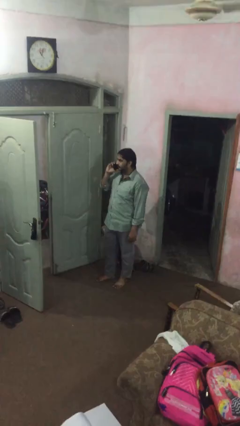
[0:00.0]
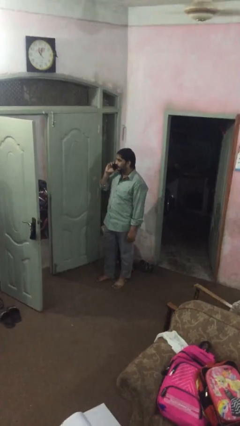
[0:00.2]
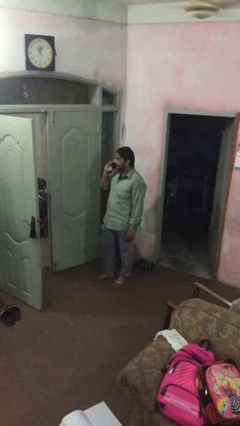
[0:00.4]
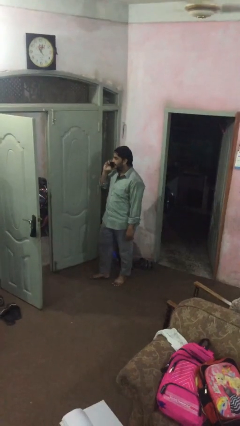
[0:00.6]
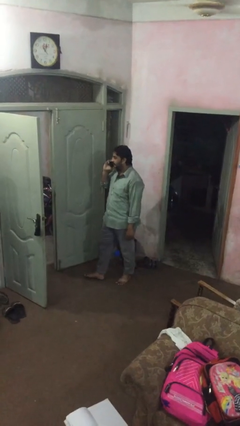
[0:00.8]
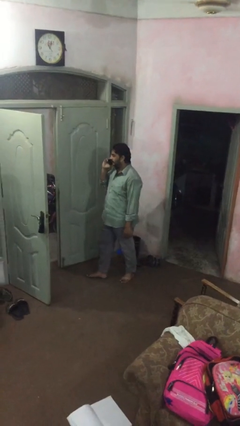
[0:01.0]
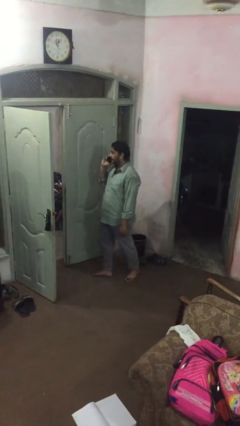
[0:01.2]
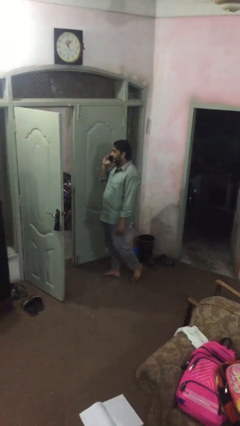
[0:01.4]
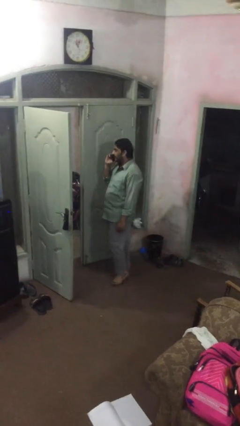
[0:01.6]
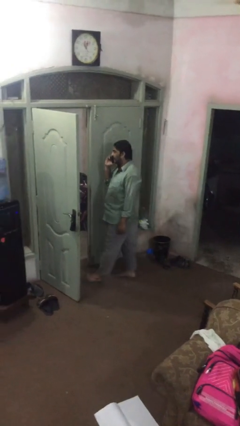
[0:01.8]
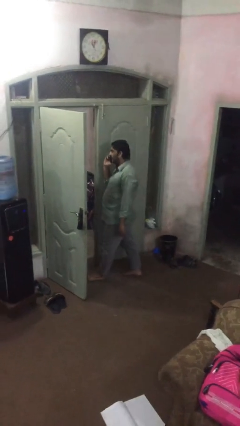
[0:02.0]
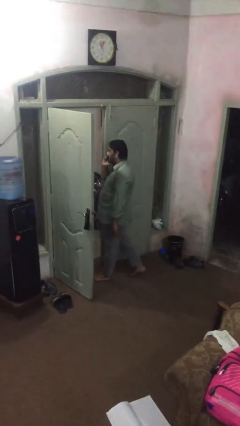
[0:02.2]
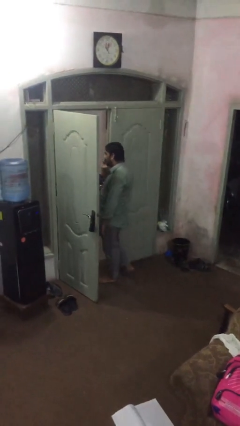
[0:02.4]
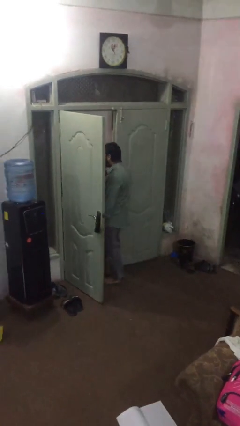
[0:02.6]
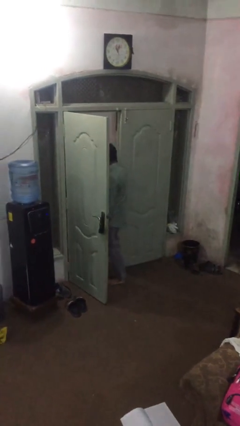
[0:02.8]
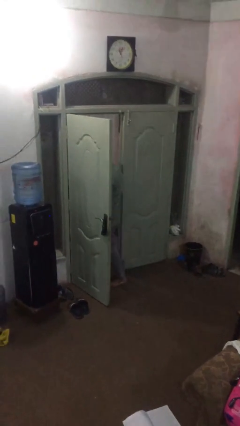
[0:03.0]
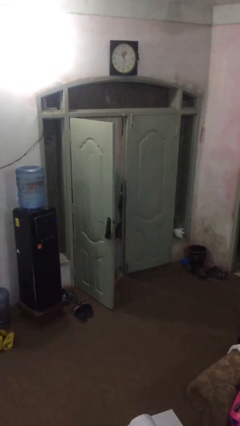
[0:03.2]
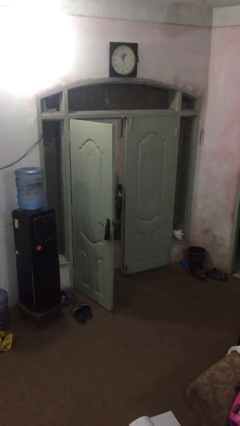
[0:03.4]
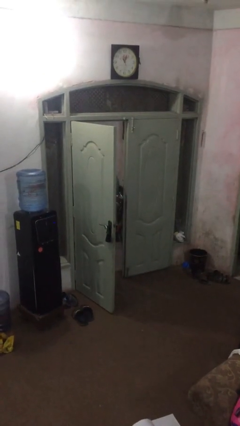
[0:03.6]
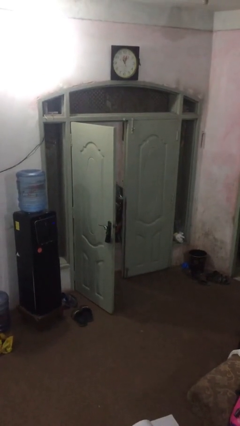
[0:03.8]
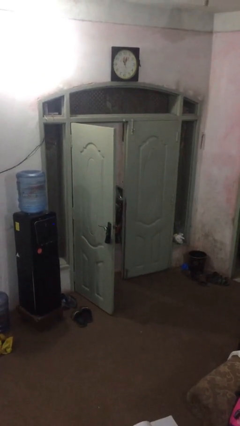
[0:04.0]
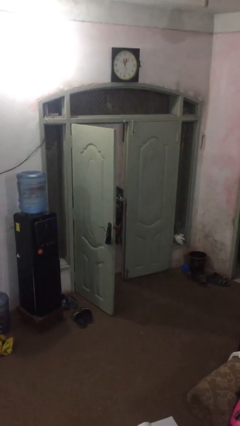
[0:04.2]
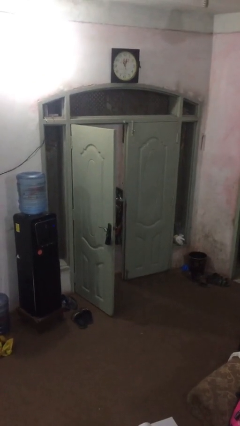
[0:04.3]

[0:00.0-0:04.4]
person exits scene through structure

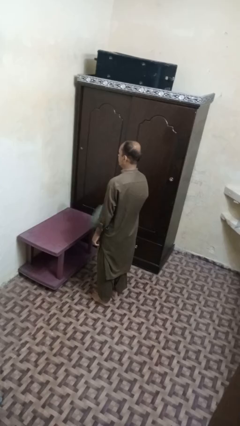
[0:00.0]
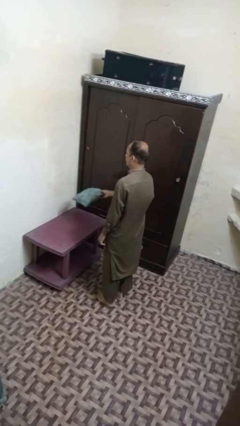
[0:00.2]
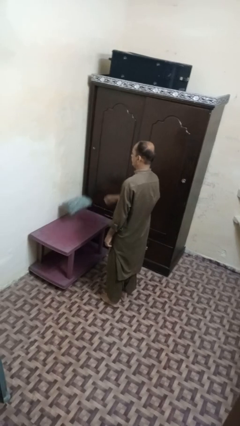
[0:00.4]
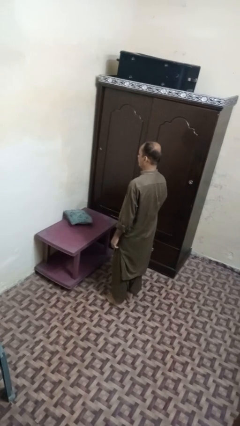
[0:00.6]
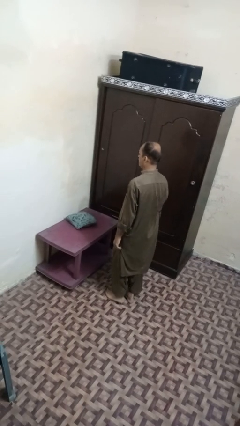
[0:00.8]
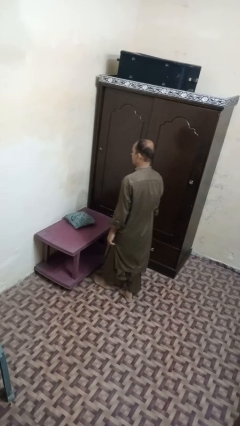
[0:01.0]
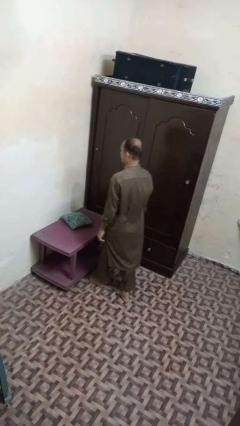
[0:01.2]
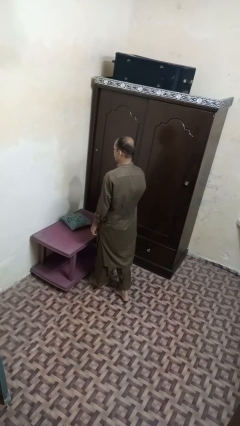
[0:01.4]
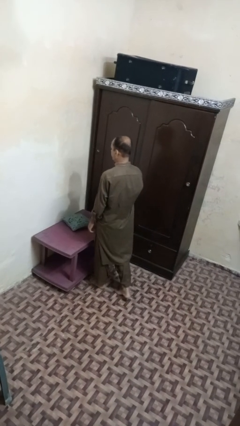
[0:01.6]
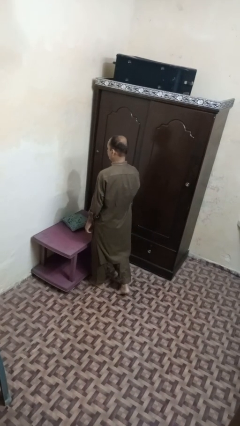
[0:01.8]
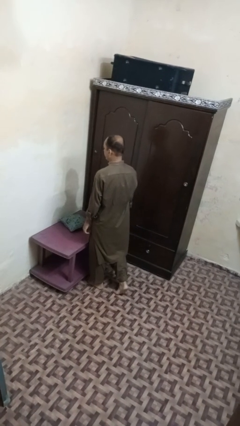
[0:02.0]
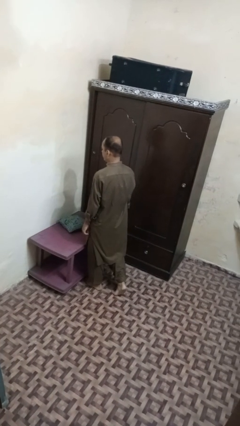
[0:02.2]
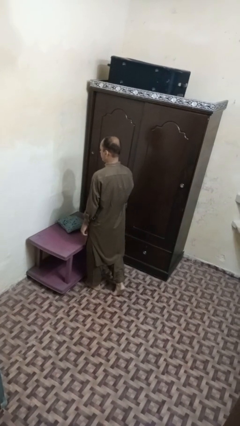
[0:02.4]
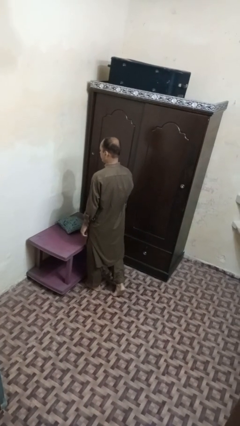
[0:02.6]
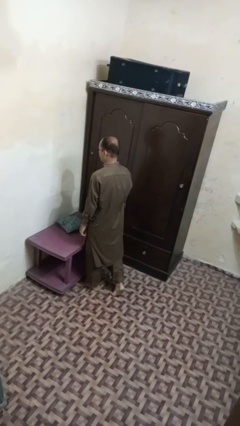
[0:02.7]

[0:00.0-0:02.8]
person throws object on table

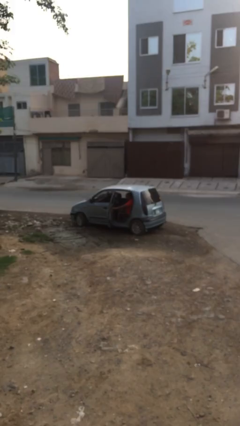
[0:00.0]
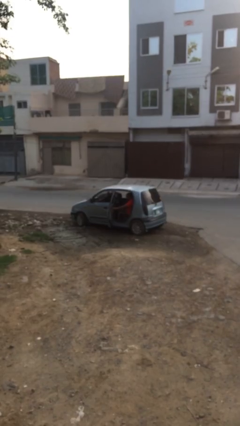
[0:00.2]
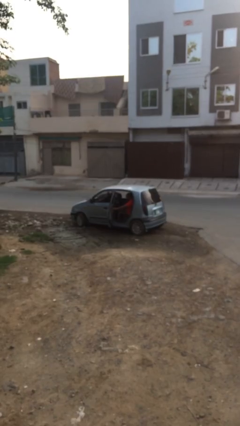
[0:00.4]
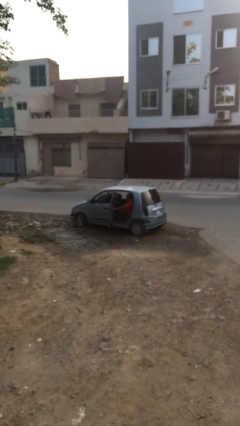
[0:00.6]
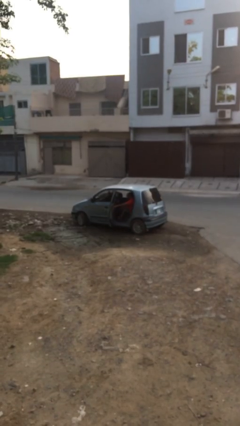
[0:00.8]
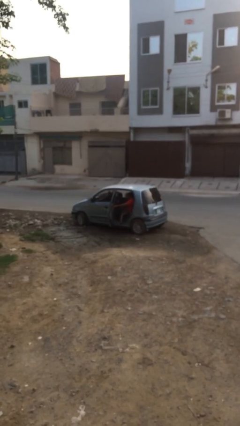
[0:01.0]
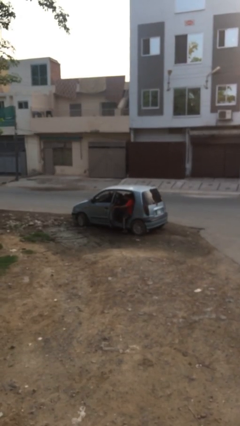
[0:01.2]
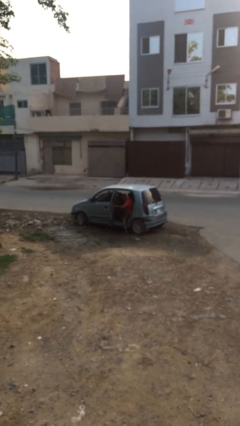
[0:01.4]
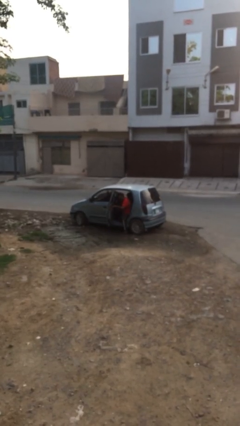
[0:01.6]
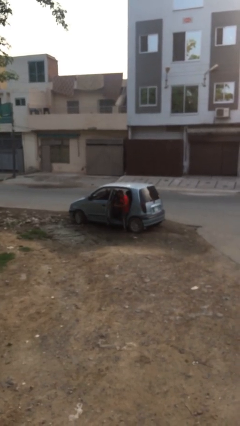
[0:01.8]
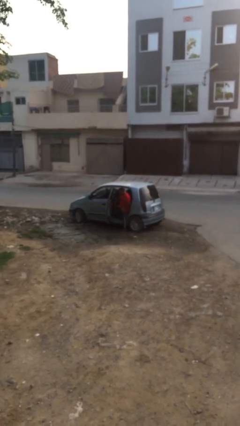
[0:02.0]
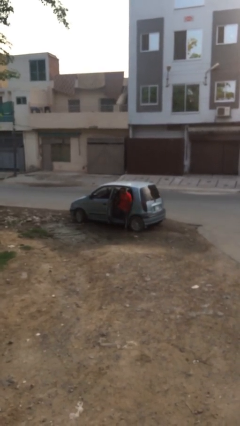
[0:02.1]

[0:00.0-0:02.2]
person exits car

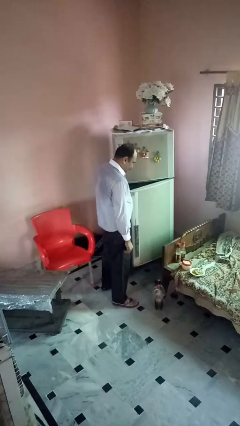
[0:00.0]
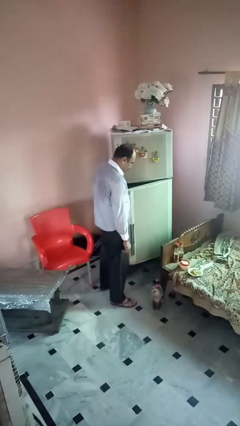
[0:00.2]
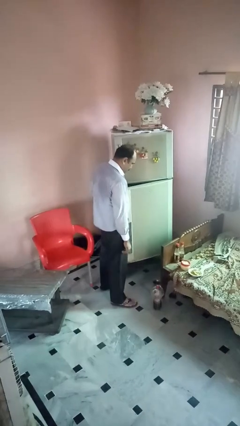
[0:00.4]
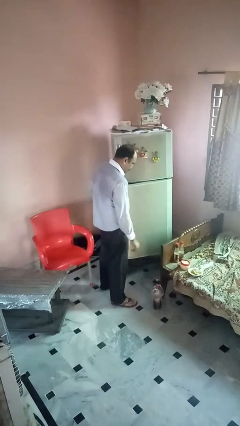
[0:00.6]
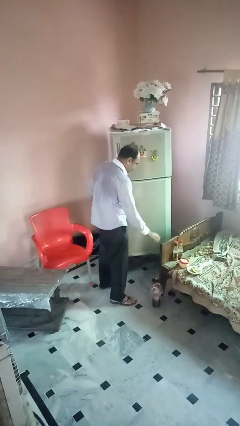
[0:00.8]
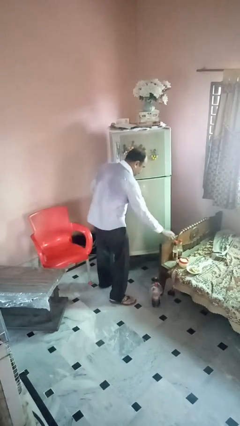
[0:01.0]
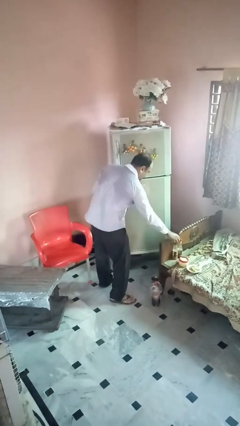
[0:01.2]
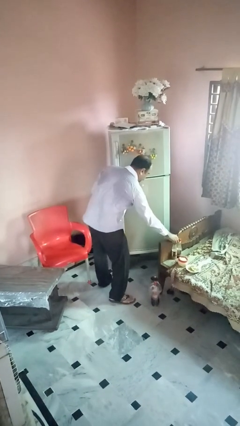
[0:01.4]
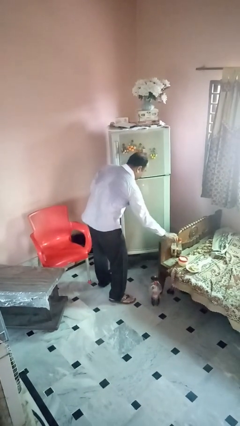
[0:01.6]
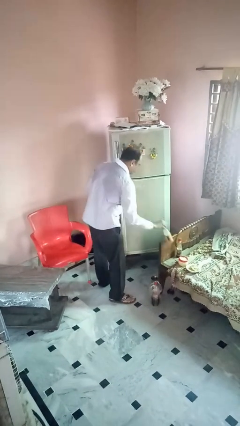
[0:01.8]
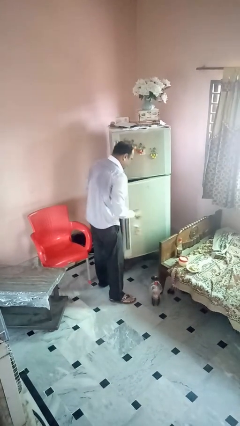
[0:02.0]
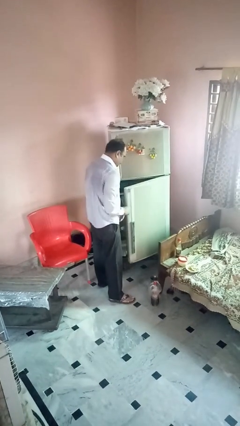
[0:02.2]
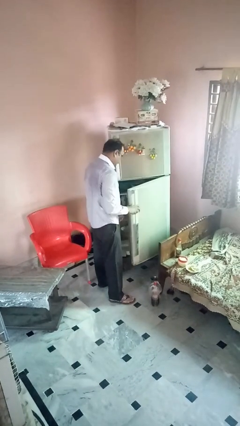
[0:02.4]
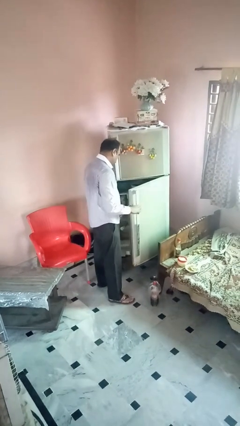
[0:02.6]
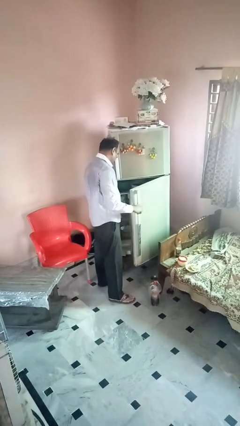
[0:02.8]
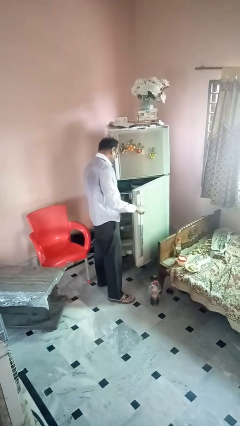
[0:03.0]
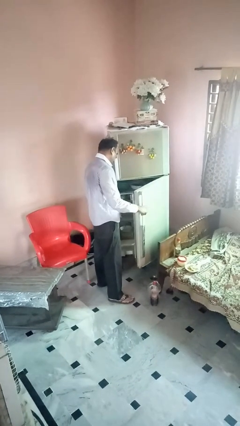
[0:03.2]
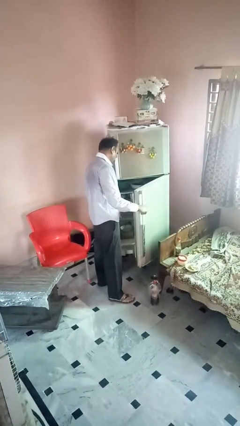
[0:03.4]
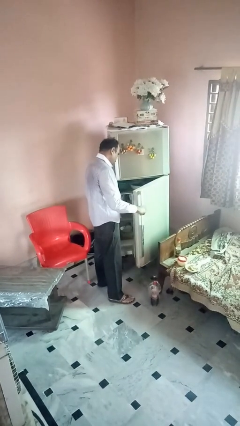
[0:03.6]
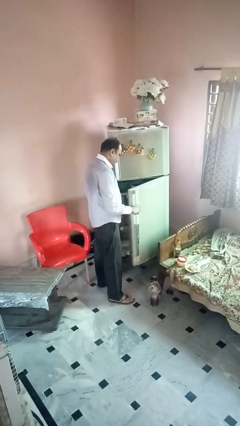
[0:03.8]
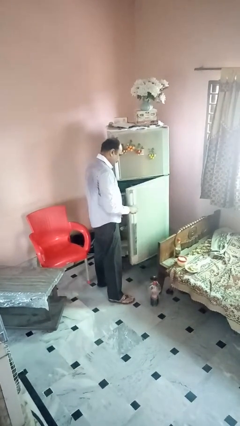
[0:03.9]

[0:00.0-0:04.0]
person loads groceries into refrigerator

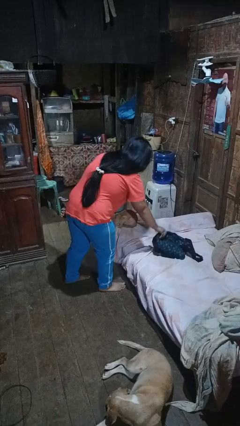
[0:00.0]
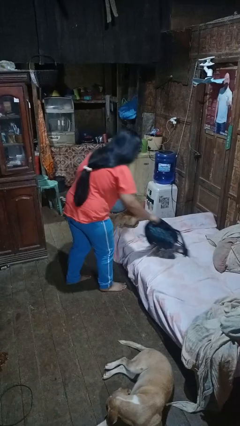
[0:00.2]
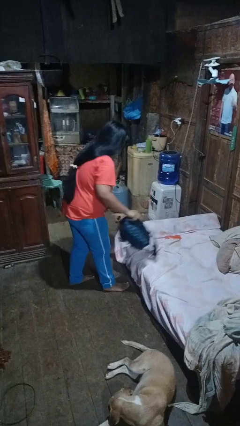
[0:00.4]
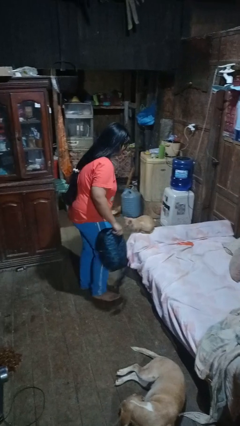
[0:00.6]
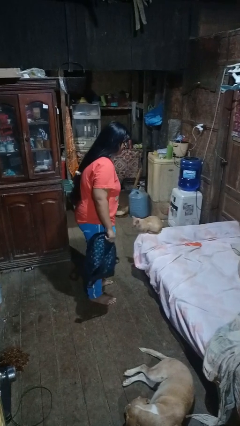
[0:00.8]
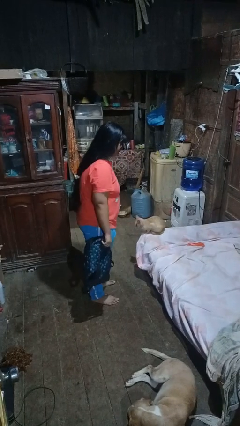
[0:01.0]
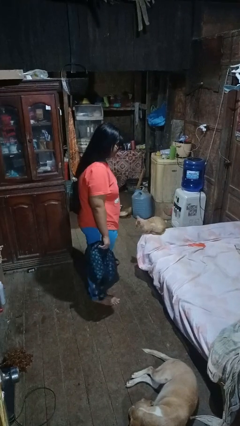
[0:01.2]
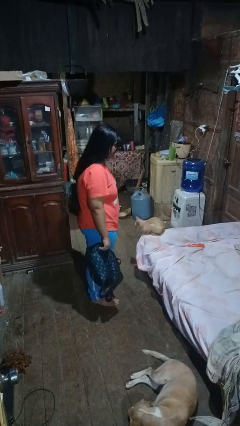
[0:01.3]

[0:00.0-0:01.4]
person picks up object from bed

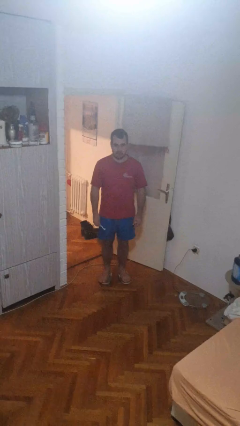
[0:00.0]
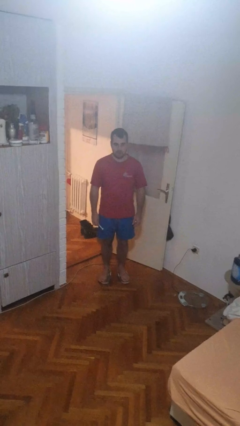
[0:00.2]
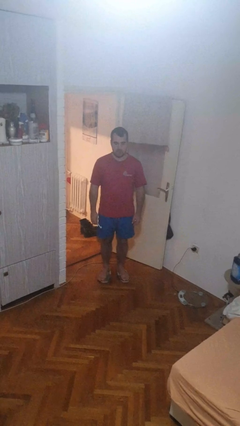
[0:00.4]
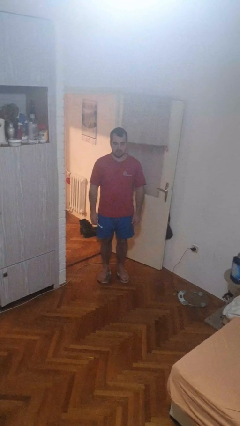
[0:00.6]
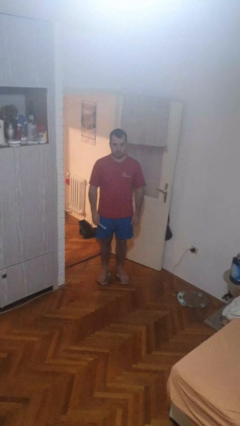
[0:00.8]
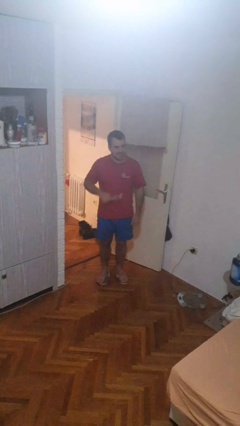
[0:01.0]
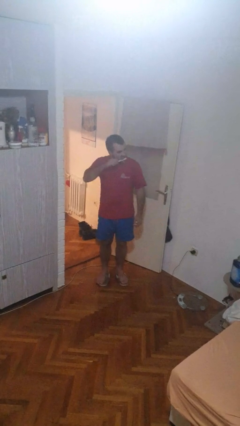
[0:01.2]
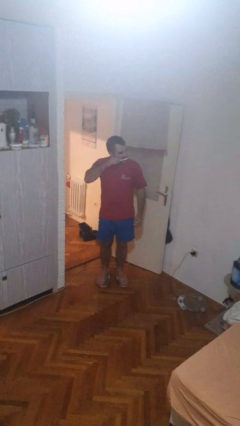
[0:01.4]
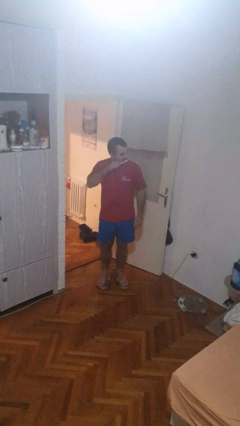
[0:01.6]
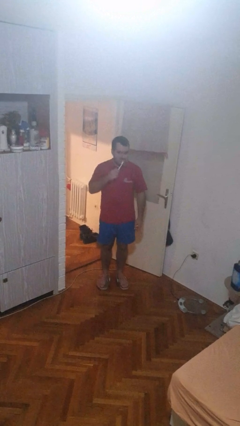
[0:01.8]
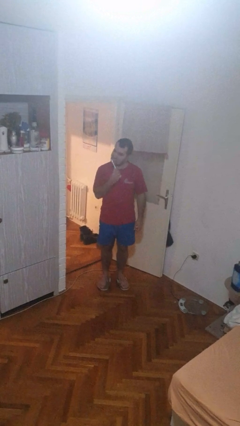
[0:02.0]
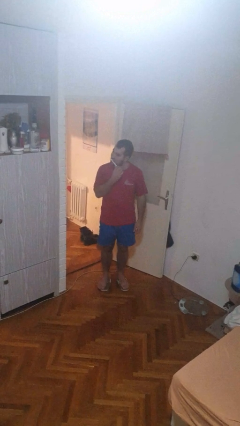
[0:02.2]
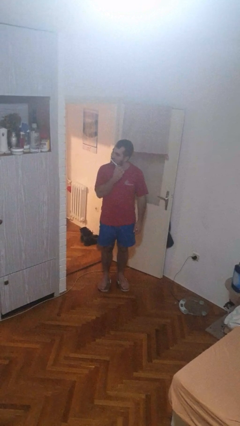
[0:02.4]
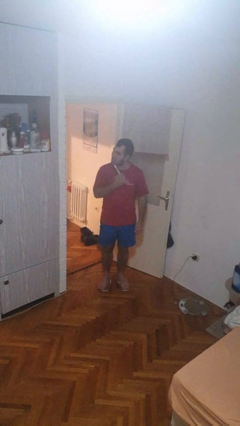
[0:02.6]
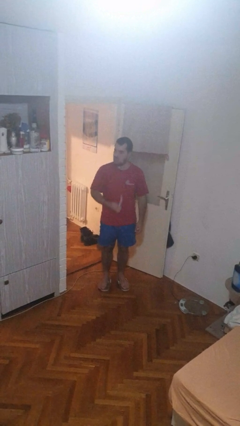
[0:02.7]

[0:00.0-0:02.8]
person brushes teeth
